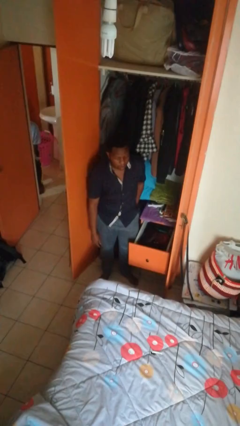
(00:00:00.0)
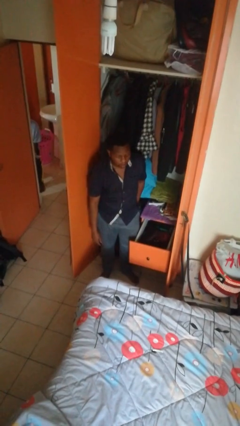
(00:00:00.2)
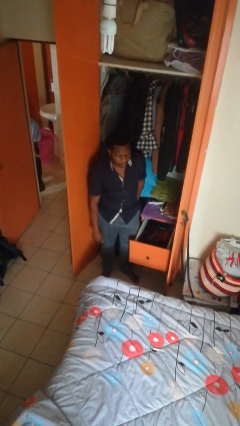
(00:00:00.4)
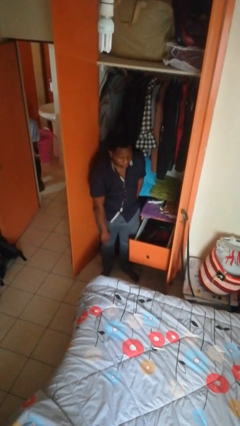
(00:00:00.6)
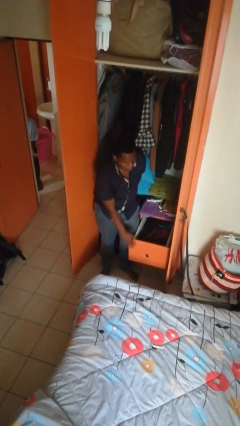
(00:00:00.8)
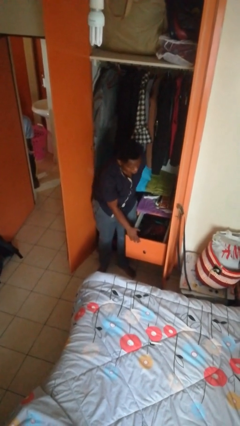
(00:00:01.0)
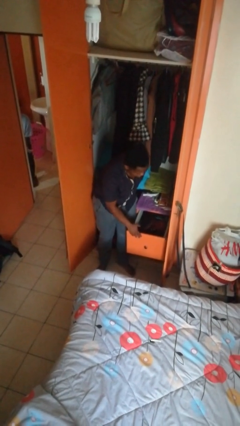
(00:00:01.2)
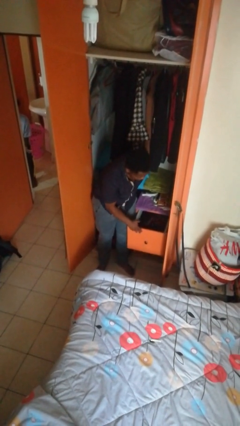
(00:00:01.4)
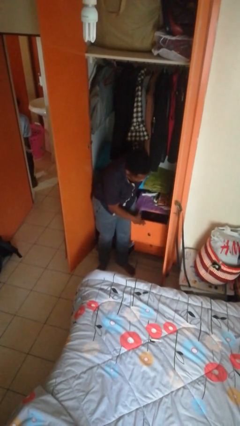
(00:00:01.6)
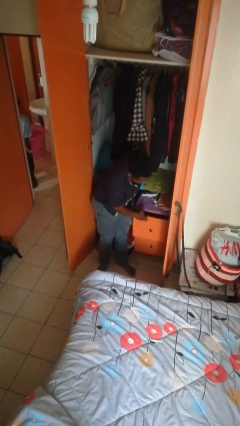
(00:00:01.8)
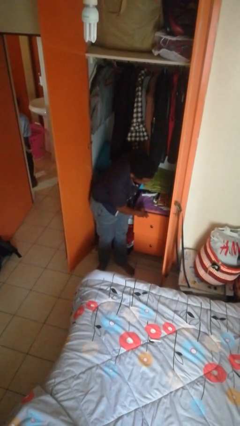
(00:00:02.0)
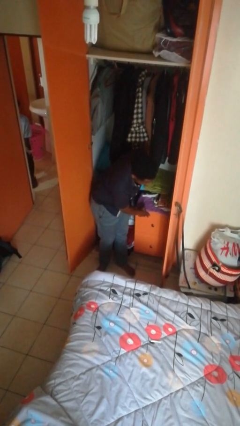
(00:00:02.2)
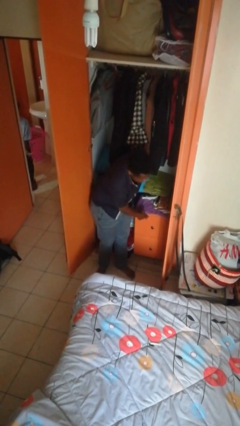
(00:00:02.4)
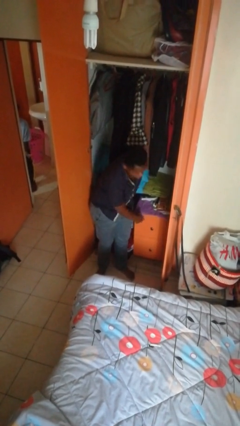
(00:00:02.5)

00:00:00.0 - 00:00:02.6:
person closes dresser drawer

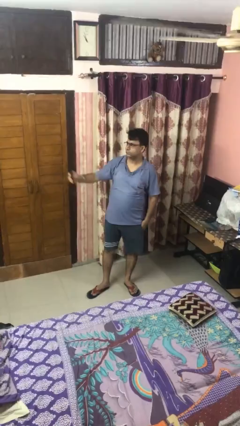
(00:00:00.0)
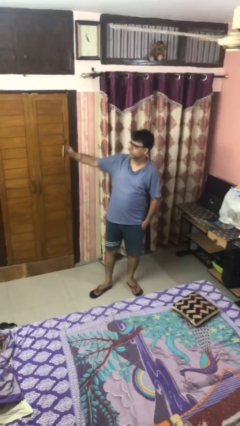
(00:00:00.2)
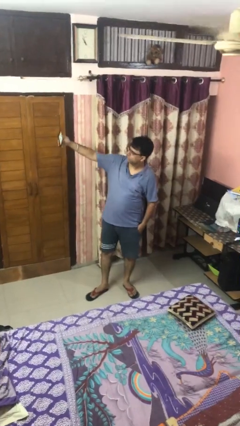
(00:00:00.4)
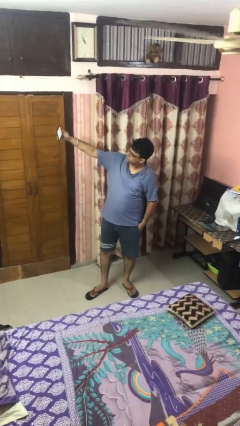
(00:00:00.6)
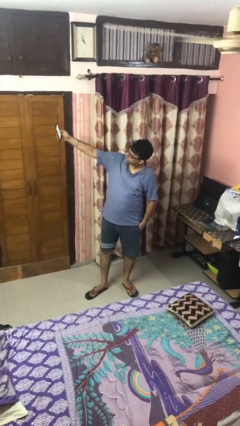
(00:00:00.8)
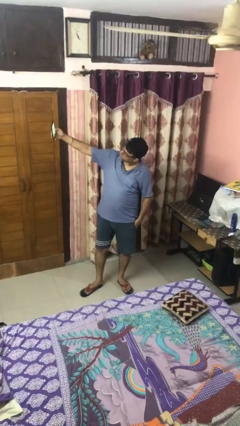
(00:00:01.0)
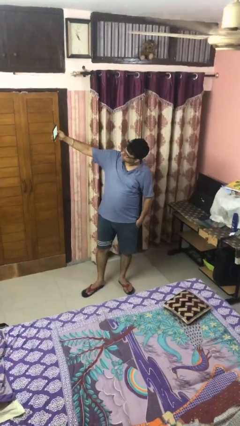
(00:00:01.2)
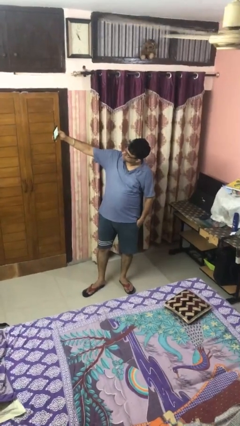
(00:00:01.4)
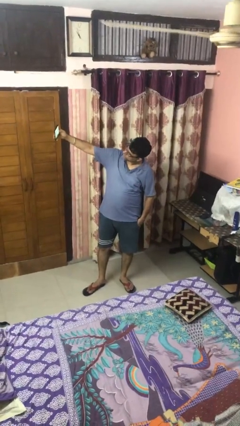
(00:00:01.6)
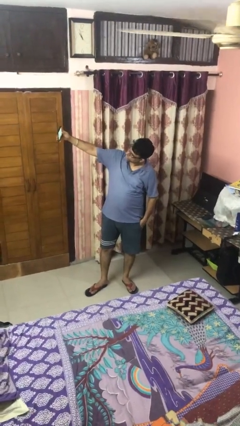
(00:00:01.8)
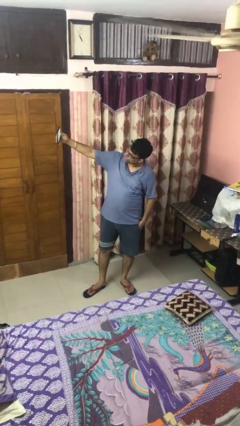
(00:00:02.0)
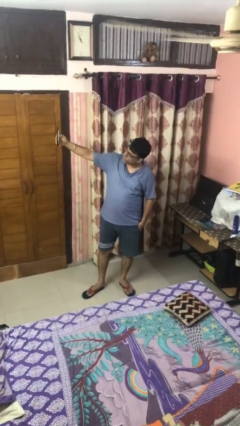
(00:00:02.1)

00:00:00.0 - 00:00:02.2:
person takes selfie

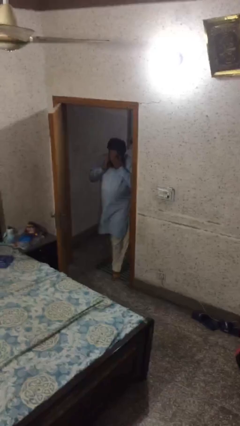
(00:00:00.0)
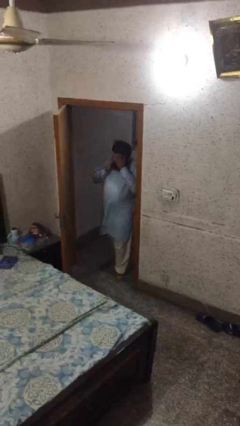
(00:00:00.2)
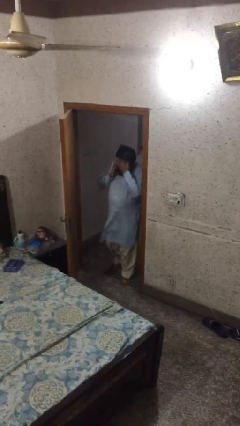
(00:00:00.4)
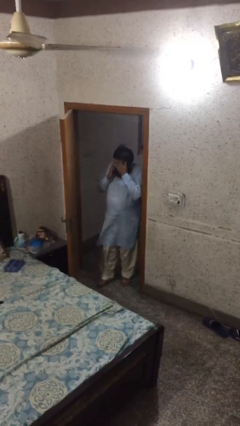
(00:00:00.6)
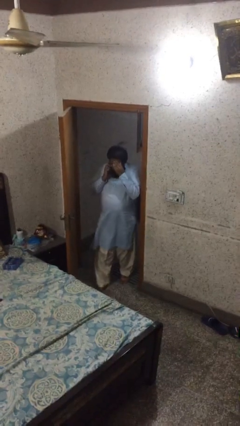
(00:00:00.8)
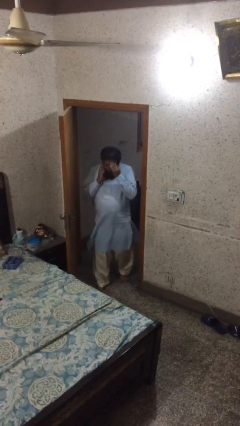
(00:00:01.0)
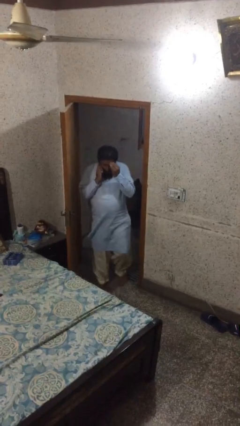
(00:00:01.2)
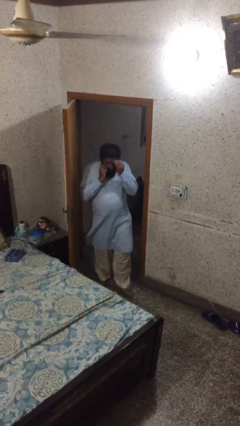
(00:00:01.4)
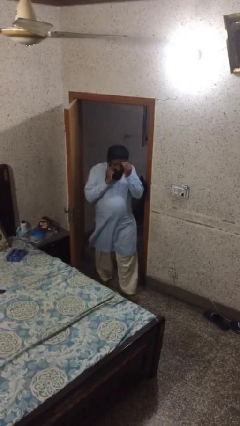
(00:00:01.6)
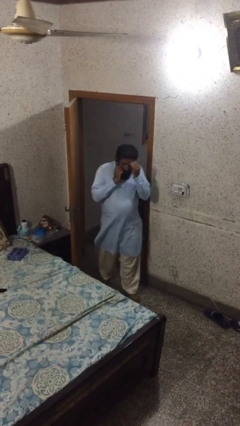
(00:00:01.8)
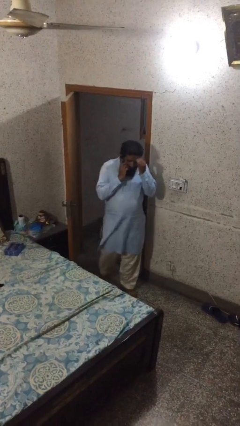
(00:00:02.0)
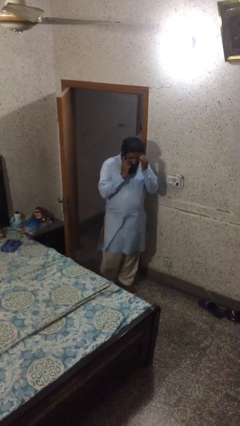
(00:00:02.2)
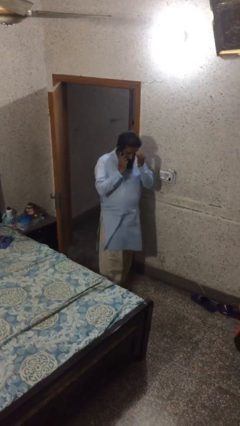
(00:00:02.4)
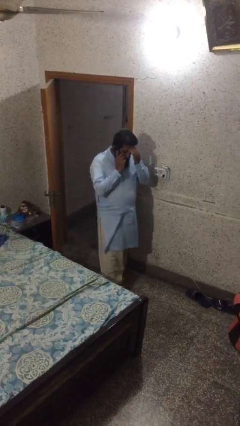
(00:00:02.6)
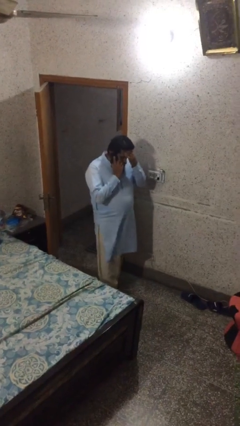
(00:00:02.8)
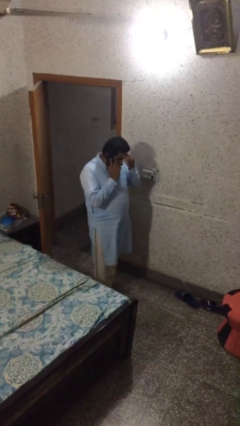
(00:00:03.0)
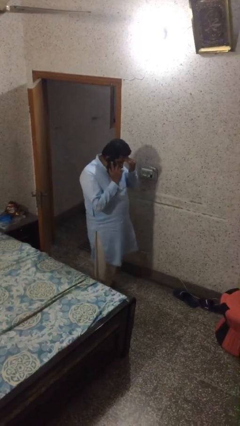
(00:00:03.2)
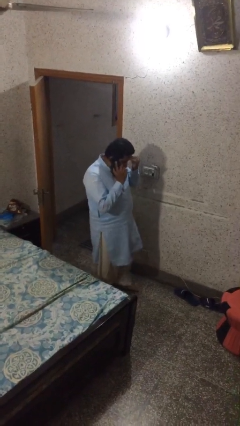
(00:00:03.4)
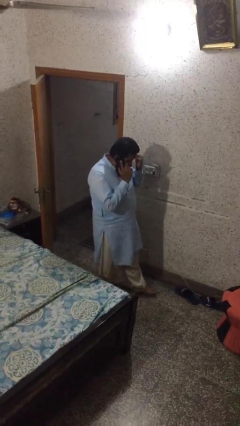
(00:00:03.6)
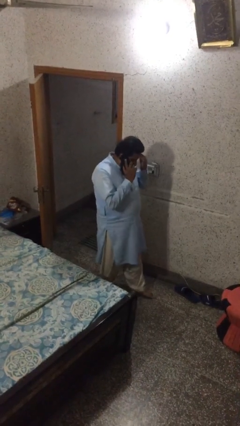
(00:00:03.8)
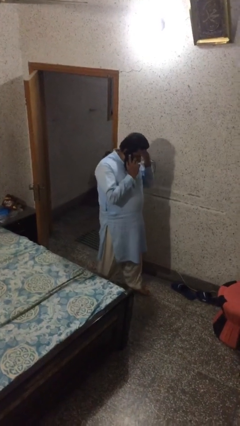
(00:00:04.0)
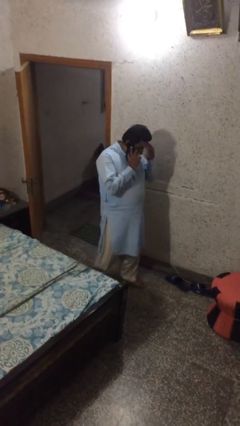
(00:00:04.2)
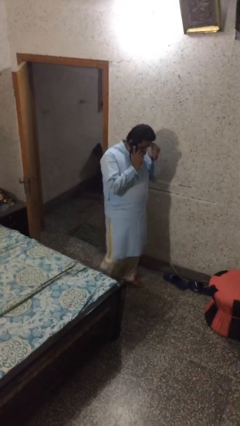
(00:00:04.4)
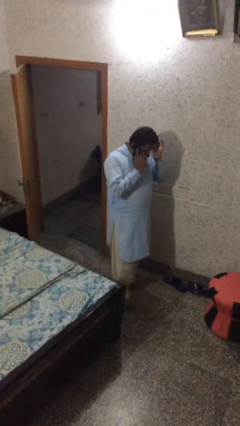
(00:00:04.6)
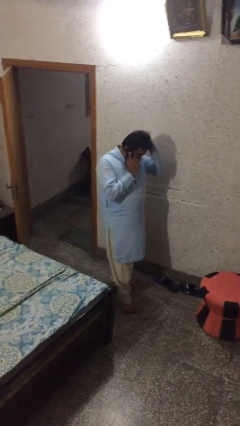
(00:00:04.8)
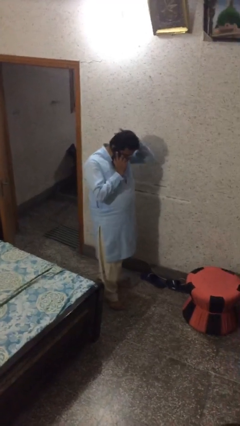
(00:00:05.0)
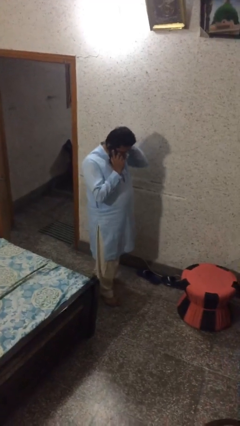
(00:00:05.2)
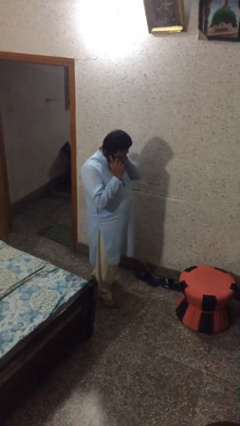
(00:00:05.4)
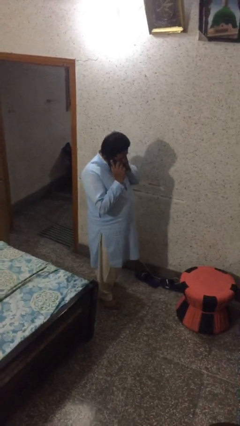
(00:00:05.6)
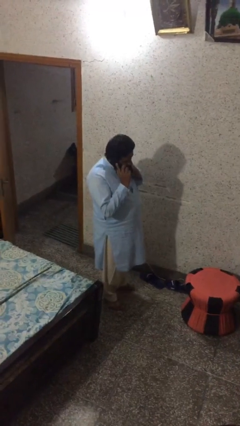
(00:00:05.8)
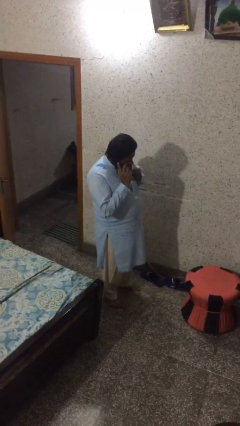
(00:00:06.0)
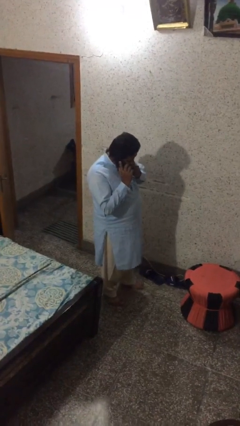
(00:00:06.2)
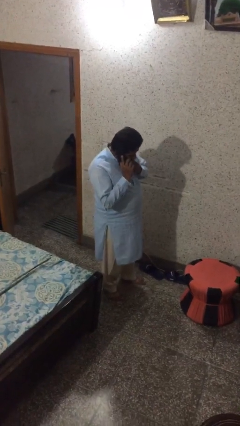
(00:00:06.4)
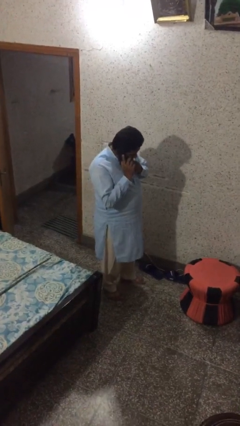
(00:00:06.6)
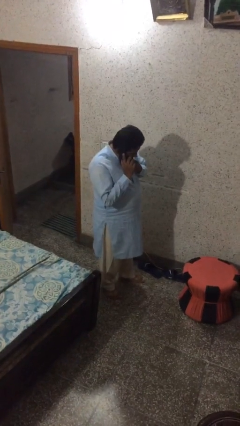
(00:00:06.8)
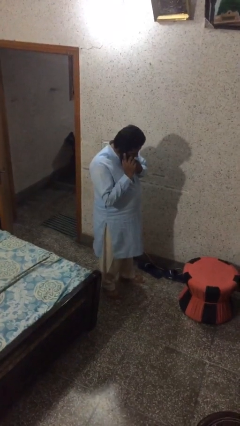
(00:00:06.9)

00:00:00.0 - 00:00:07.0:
person enters scene through structure

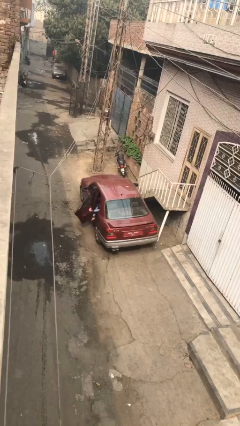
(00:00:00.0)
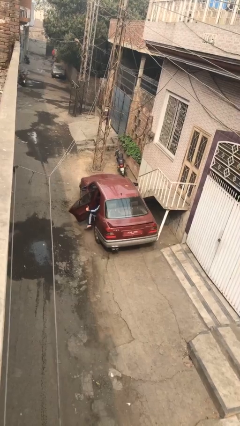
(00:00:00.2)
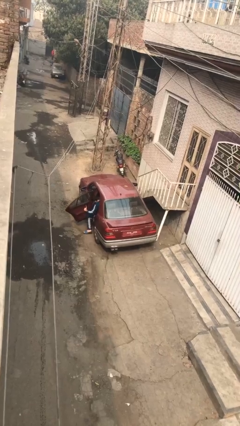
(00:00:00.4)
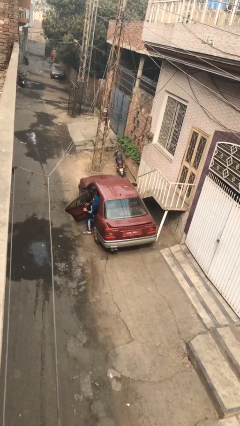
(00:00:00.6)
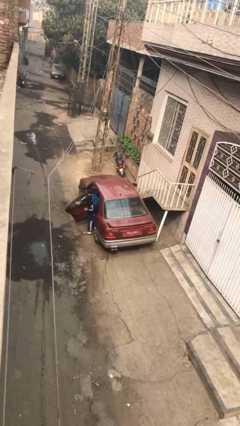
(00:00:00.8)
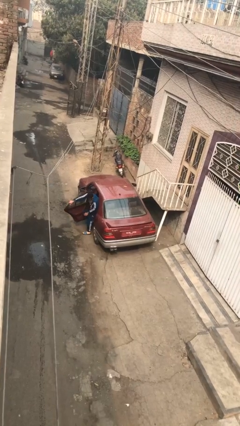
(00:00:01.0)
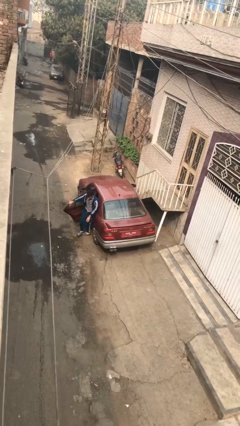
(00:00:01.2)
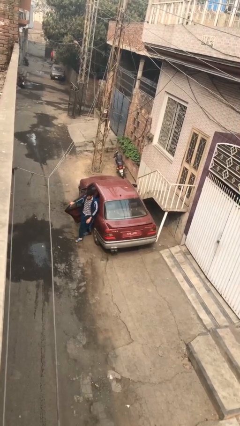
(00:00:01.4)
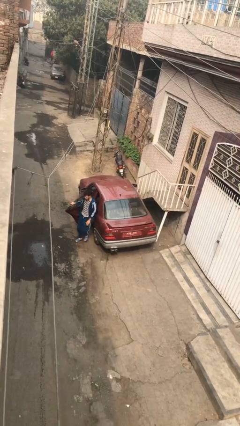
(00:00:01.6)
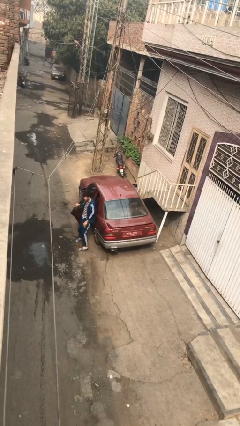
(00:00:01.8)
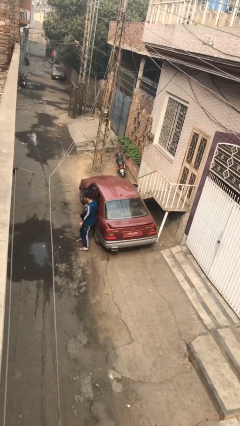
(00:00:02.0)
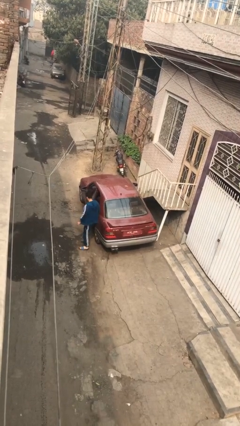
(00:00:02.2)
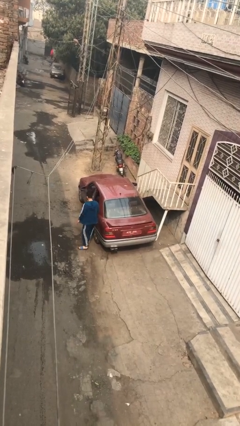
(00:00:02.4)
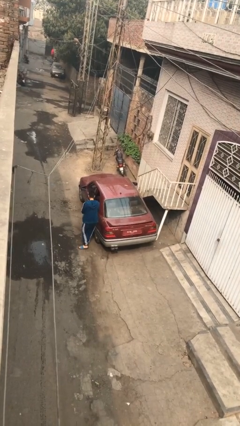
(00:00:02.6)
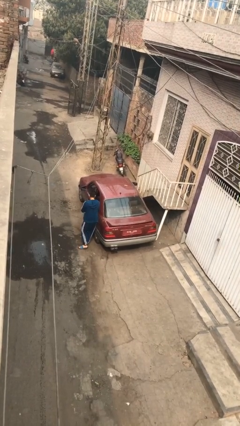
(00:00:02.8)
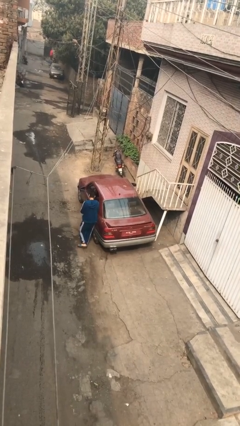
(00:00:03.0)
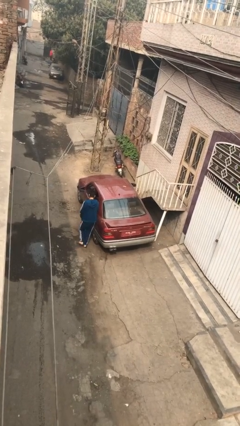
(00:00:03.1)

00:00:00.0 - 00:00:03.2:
car drops off person

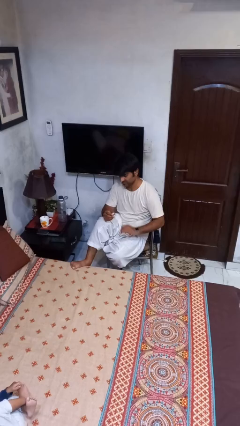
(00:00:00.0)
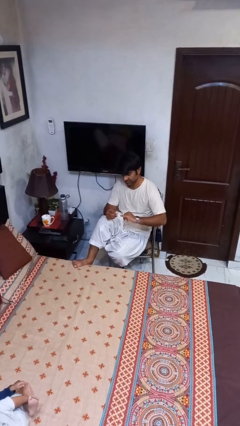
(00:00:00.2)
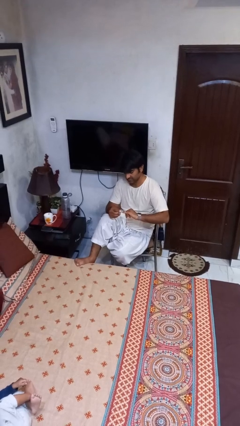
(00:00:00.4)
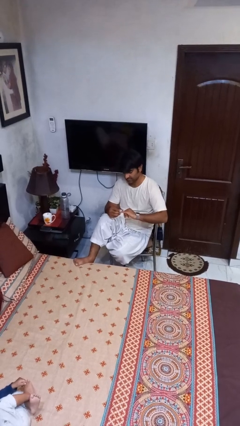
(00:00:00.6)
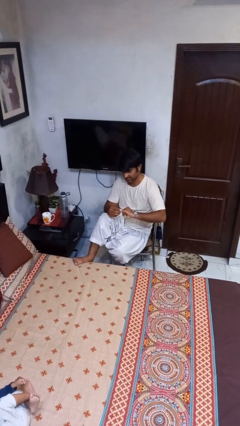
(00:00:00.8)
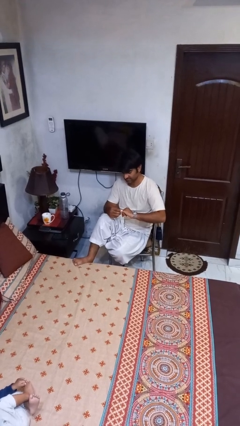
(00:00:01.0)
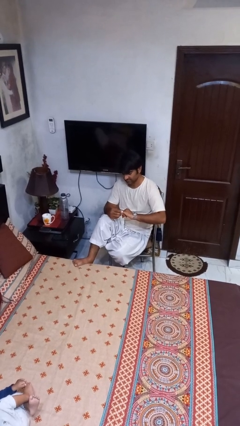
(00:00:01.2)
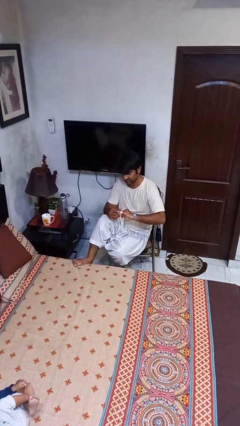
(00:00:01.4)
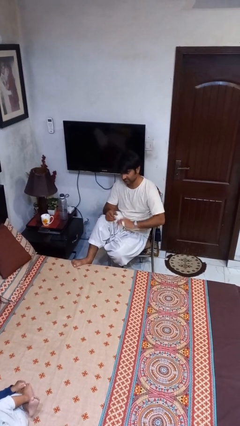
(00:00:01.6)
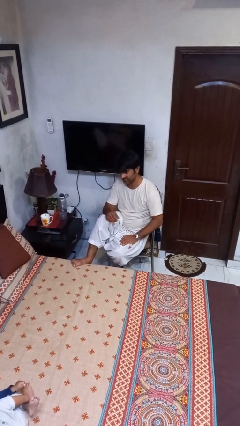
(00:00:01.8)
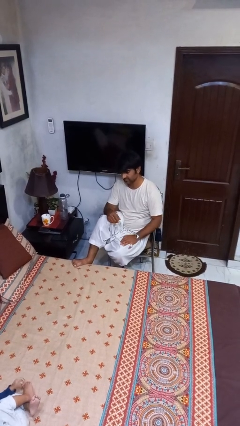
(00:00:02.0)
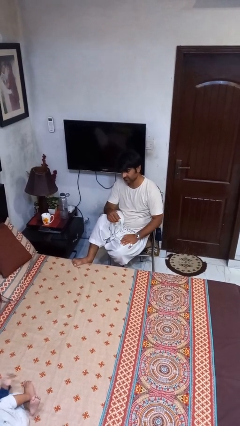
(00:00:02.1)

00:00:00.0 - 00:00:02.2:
person puts on ring
